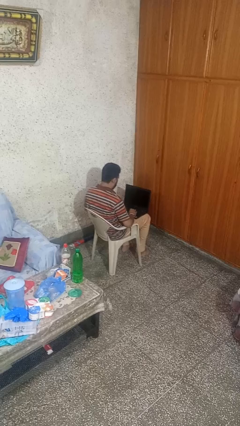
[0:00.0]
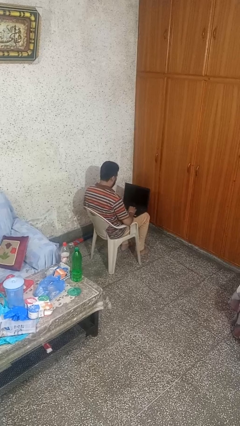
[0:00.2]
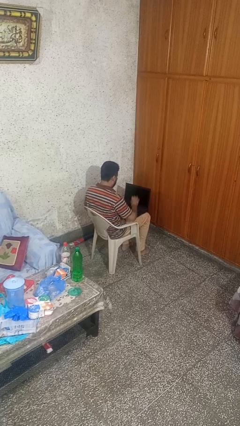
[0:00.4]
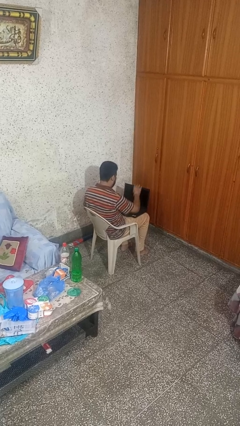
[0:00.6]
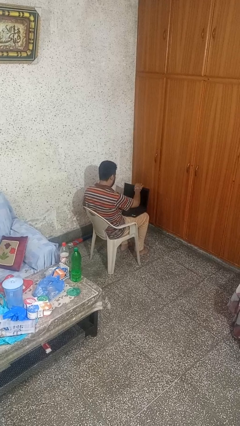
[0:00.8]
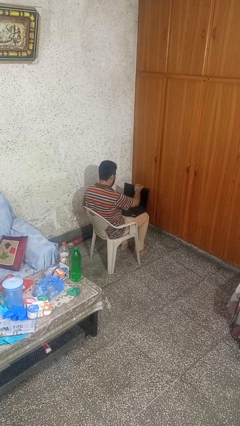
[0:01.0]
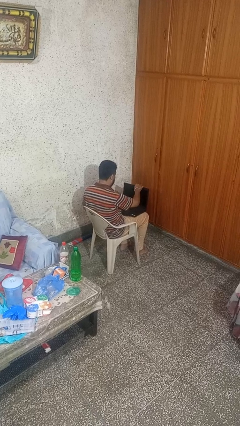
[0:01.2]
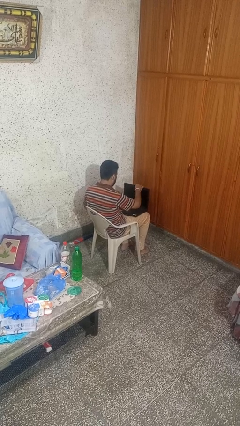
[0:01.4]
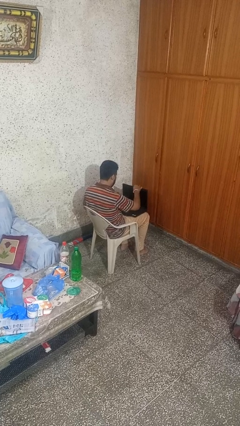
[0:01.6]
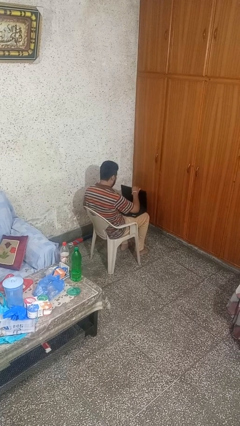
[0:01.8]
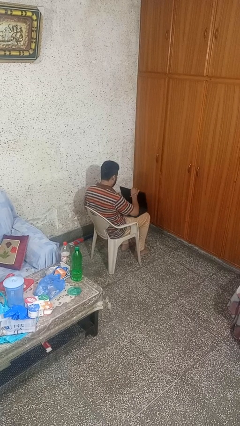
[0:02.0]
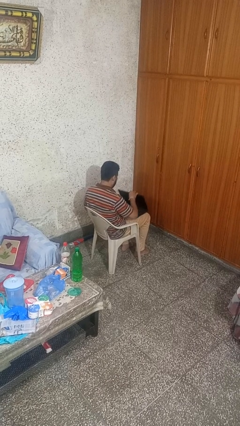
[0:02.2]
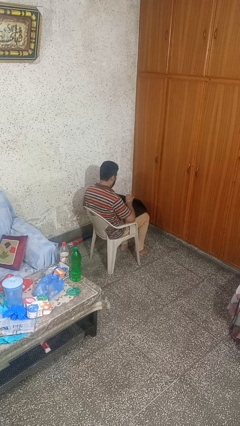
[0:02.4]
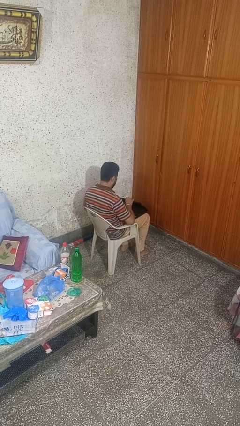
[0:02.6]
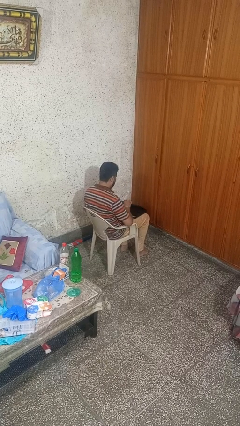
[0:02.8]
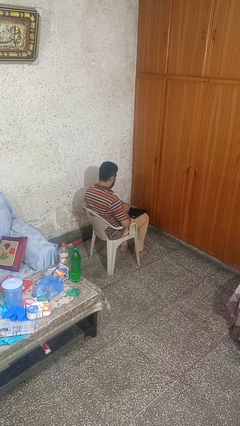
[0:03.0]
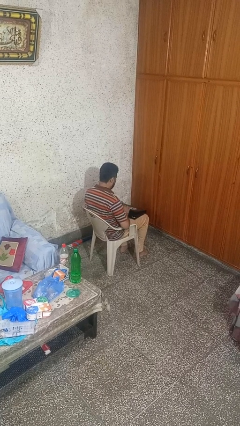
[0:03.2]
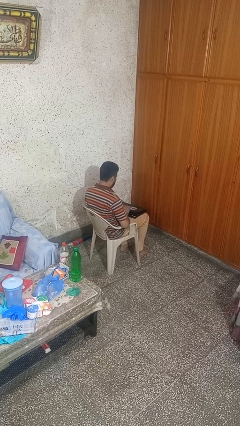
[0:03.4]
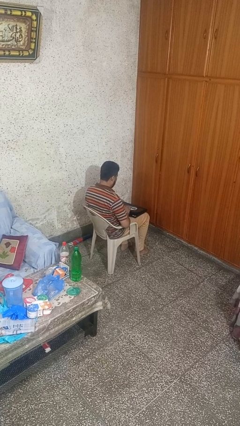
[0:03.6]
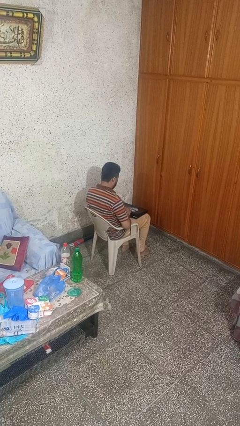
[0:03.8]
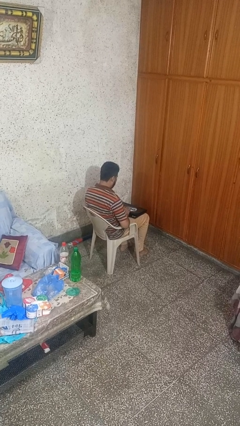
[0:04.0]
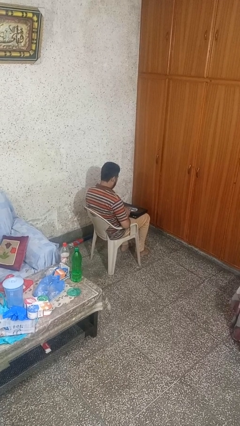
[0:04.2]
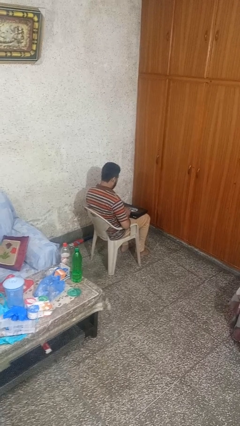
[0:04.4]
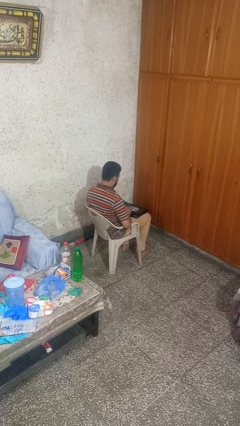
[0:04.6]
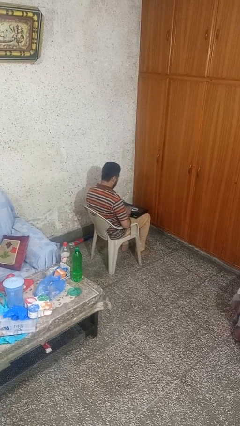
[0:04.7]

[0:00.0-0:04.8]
person closes laptop

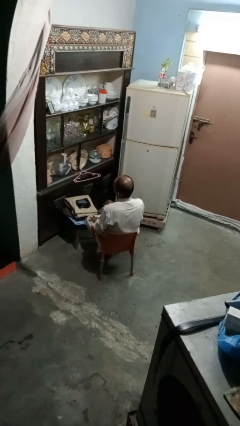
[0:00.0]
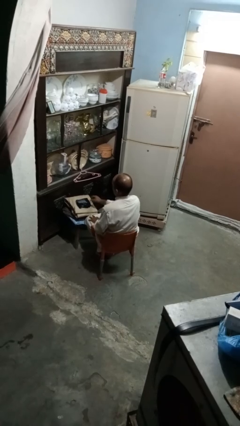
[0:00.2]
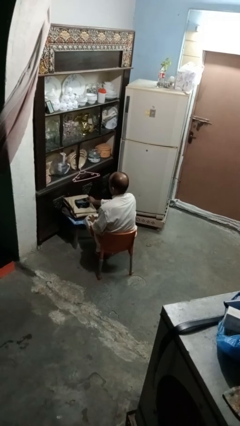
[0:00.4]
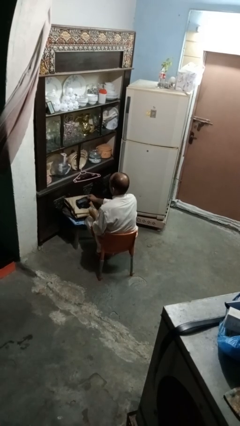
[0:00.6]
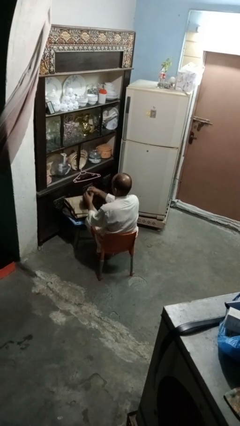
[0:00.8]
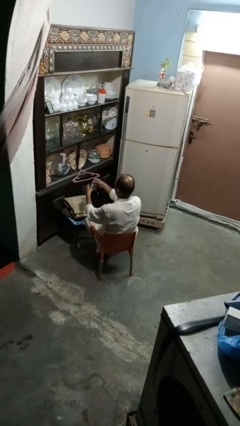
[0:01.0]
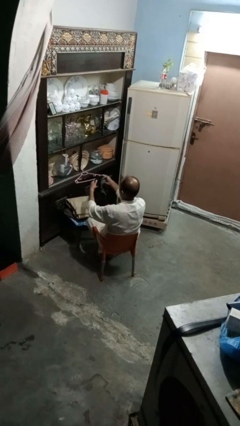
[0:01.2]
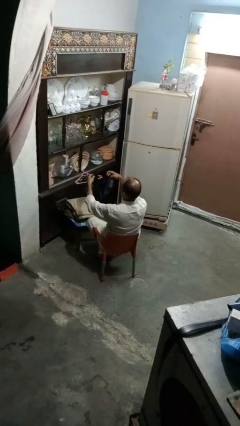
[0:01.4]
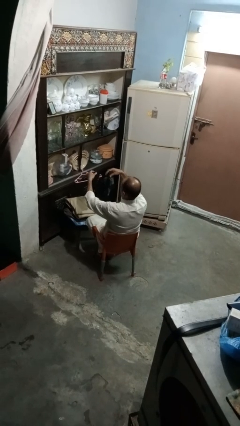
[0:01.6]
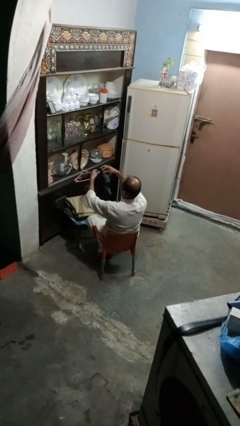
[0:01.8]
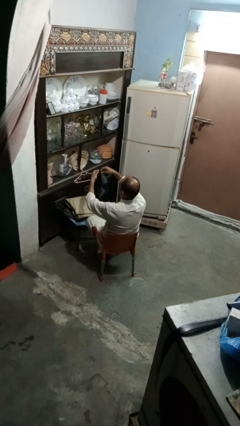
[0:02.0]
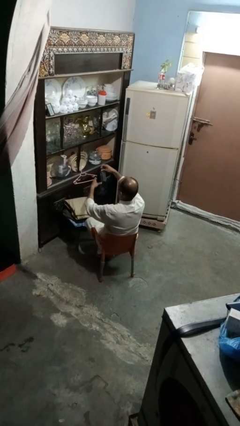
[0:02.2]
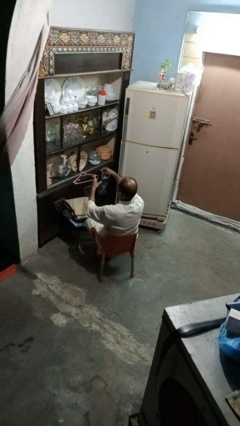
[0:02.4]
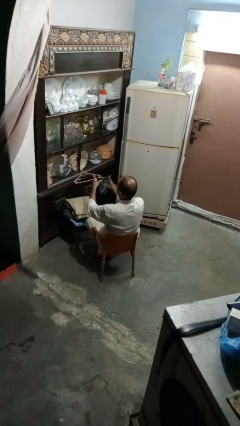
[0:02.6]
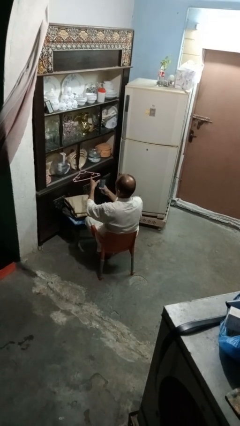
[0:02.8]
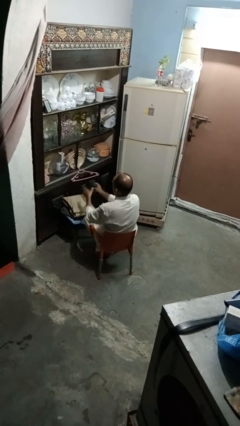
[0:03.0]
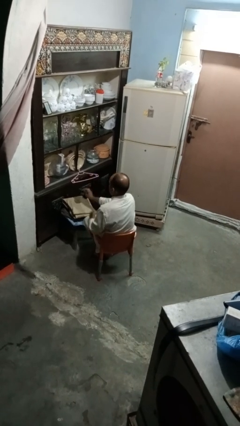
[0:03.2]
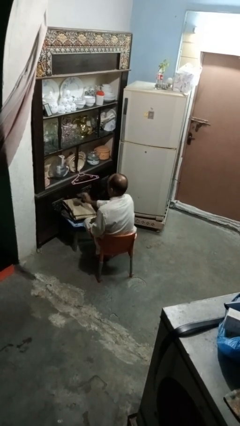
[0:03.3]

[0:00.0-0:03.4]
person folds socks

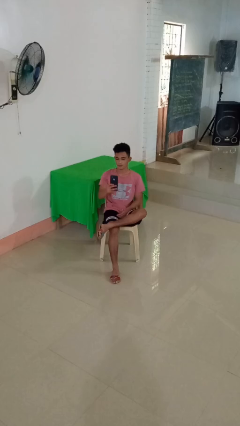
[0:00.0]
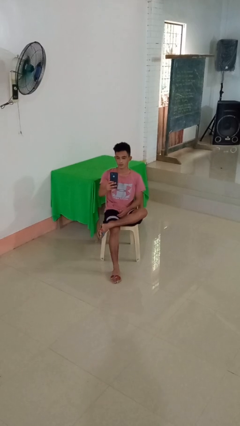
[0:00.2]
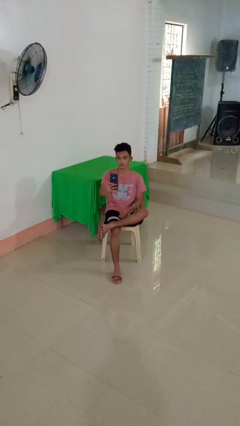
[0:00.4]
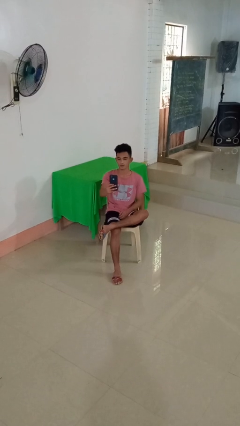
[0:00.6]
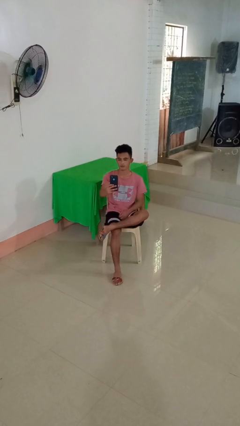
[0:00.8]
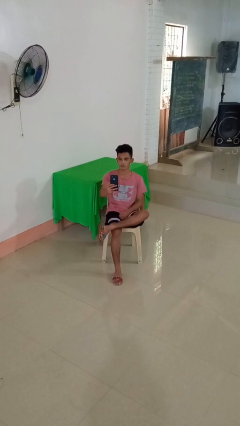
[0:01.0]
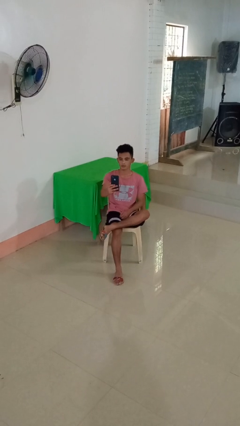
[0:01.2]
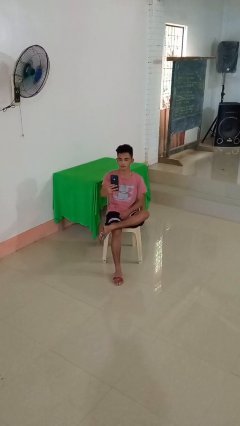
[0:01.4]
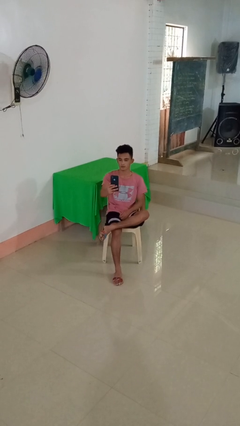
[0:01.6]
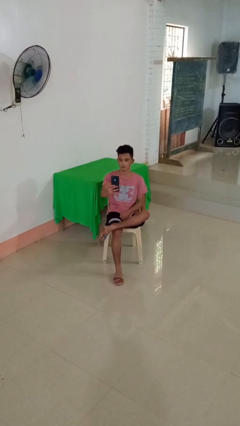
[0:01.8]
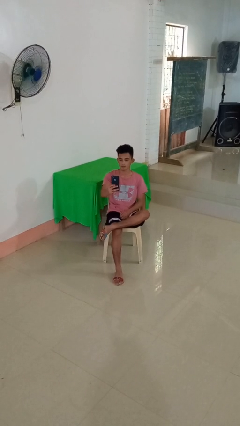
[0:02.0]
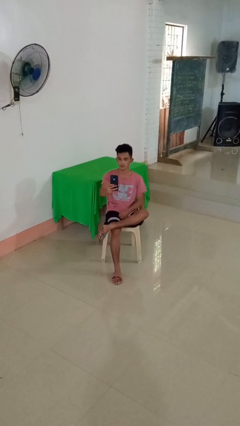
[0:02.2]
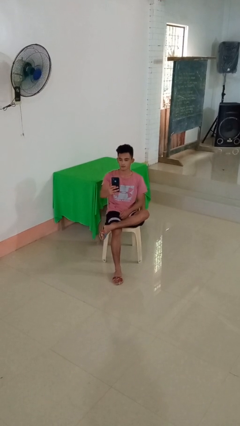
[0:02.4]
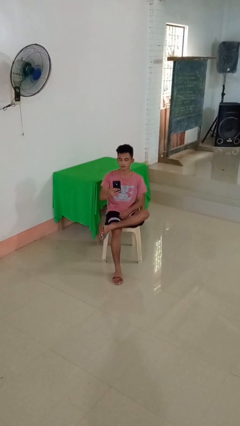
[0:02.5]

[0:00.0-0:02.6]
person takes selfie

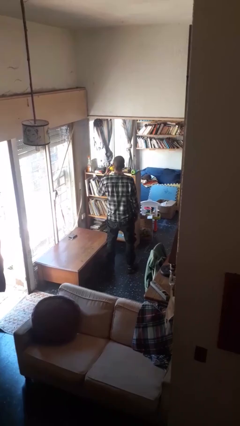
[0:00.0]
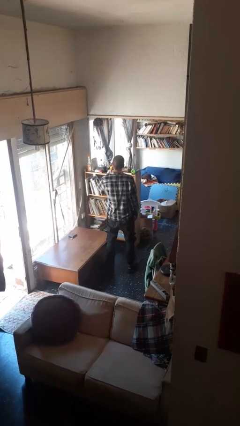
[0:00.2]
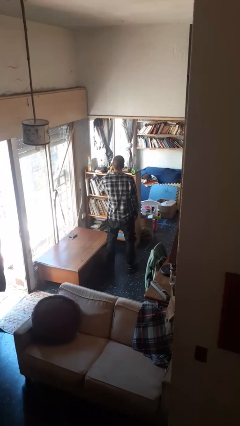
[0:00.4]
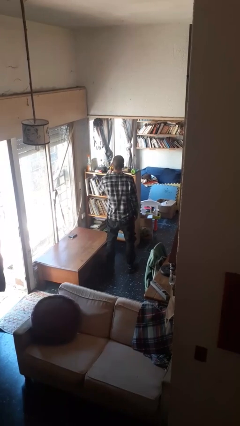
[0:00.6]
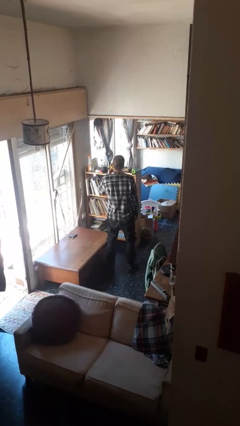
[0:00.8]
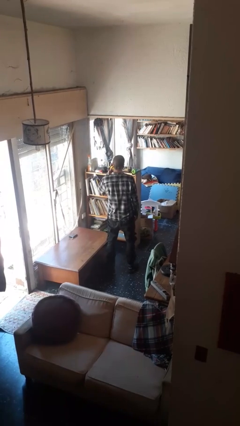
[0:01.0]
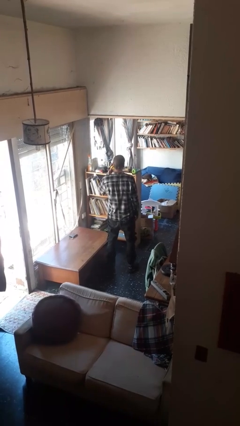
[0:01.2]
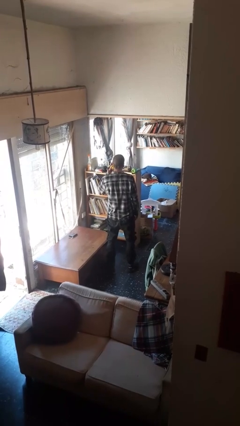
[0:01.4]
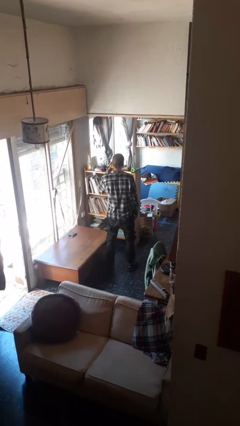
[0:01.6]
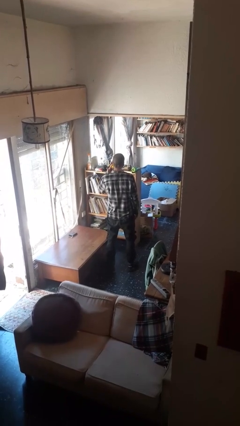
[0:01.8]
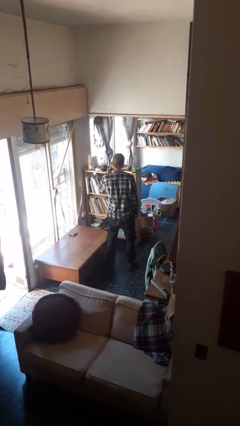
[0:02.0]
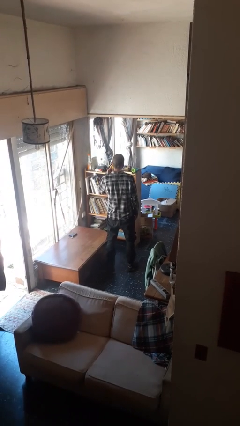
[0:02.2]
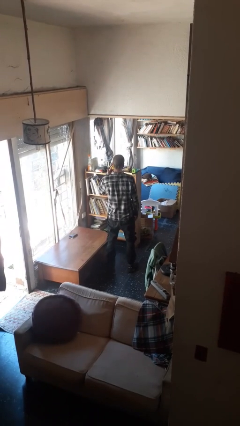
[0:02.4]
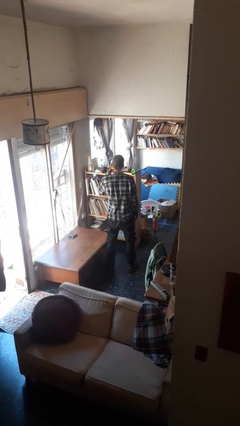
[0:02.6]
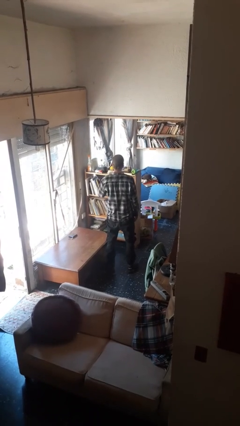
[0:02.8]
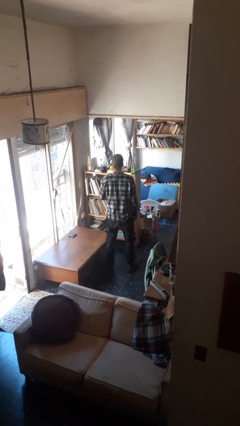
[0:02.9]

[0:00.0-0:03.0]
person gestures listen closely

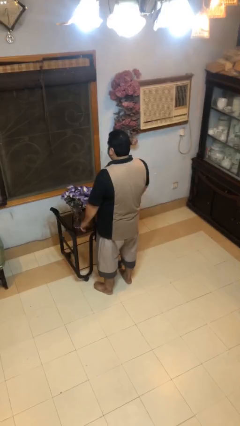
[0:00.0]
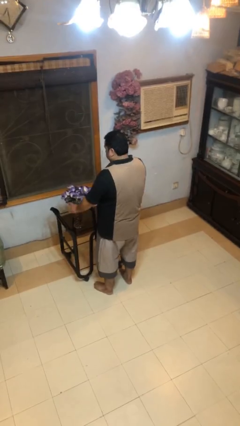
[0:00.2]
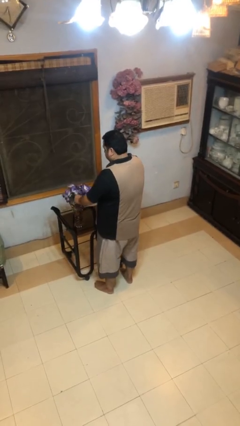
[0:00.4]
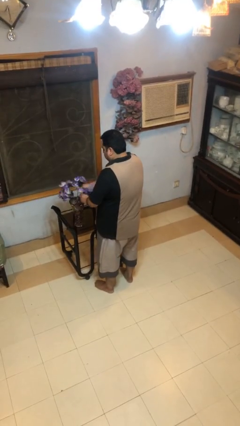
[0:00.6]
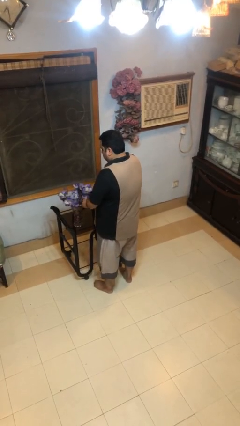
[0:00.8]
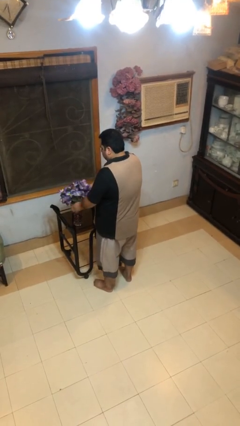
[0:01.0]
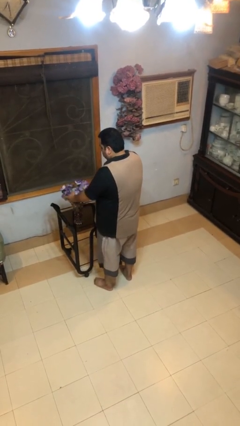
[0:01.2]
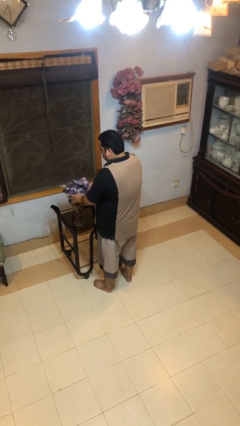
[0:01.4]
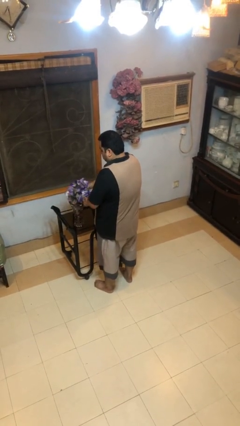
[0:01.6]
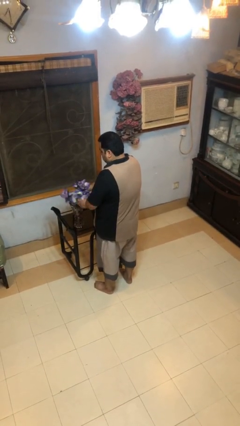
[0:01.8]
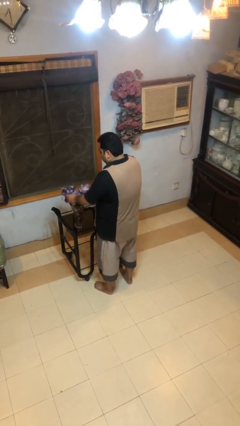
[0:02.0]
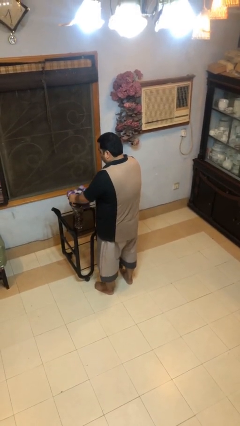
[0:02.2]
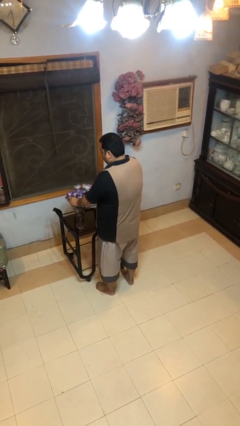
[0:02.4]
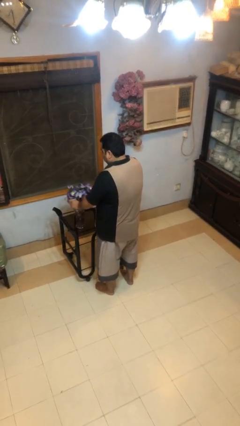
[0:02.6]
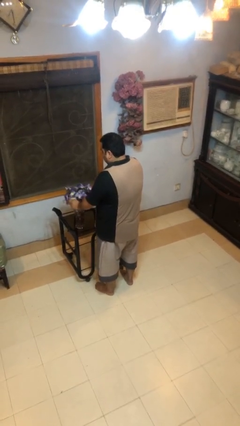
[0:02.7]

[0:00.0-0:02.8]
person arranges flowers in vase

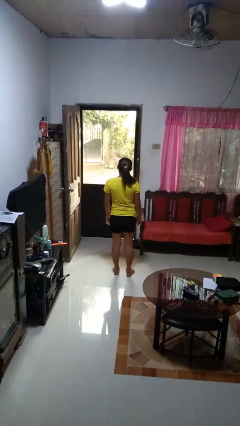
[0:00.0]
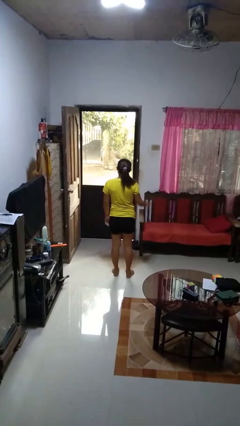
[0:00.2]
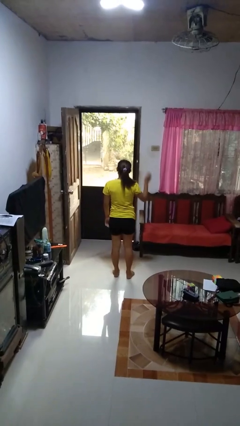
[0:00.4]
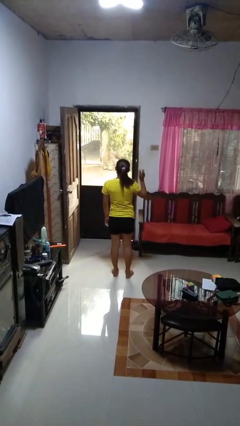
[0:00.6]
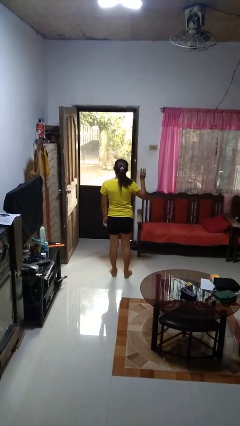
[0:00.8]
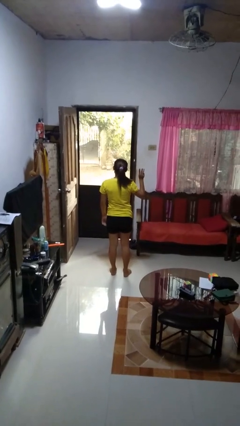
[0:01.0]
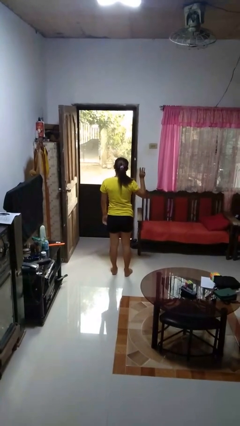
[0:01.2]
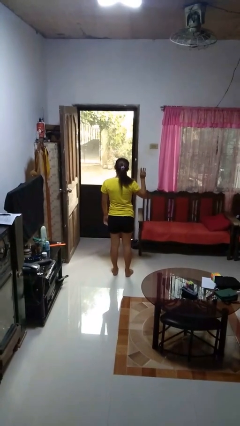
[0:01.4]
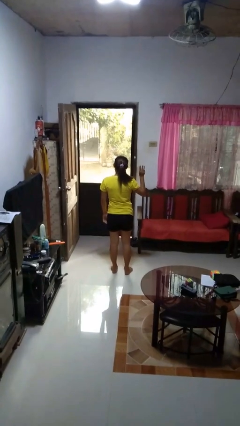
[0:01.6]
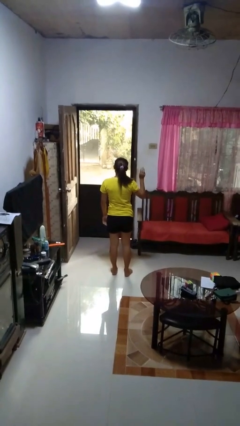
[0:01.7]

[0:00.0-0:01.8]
person gestures number three
